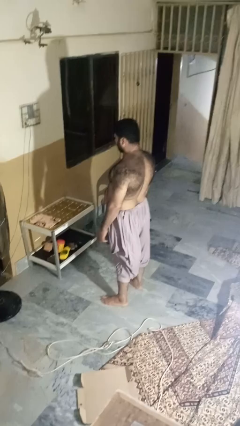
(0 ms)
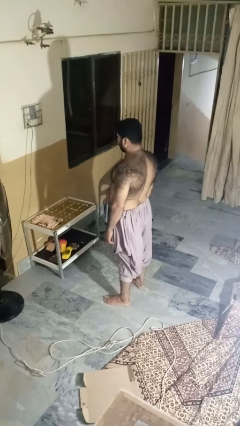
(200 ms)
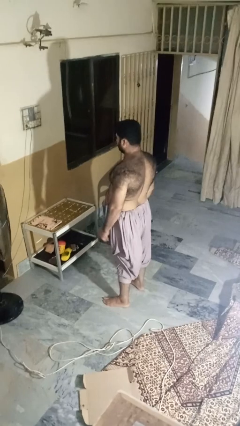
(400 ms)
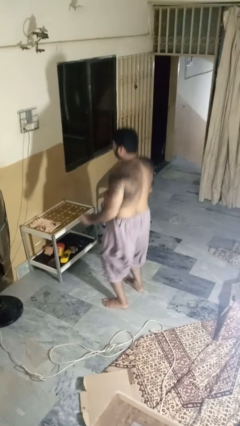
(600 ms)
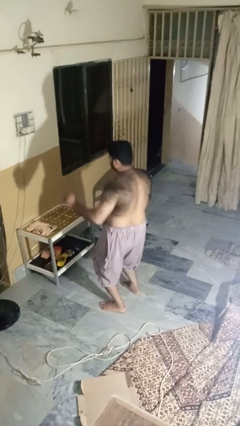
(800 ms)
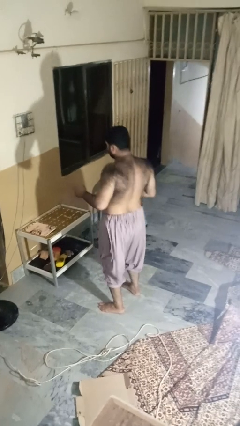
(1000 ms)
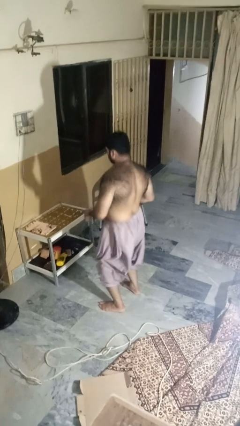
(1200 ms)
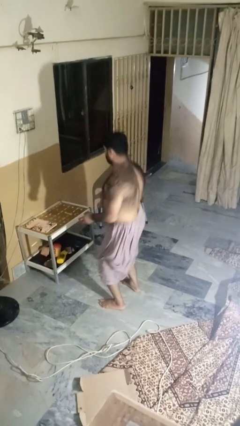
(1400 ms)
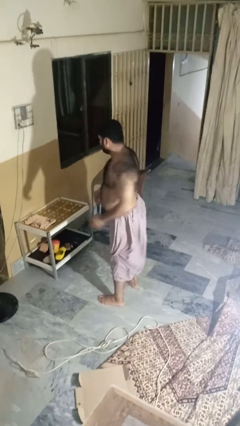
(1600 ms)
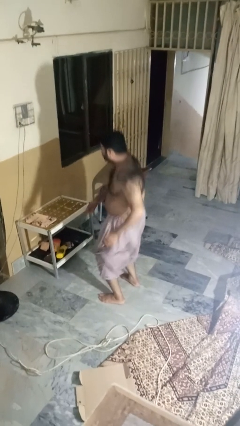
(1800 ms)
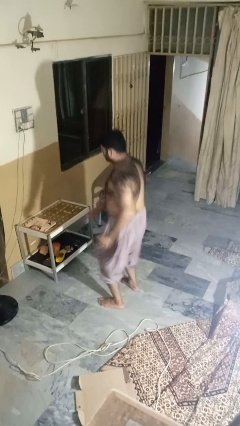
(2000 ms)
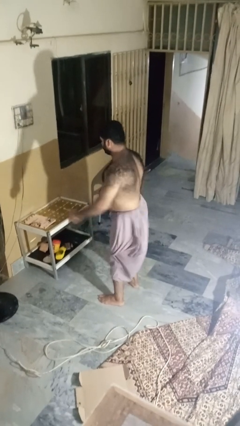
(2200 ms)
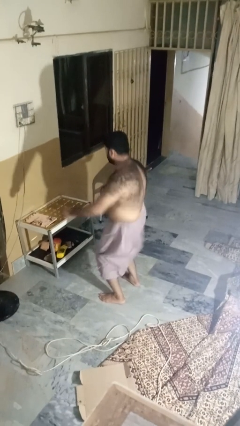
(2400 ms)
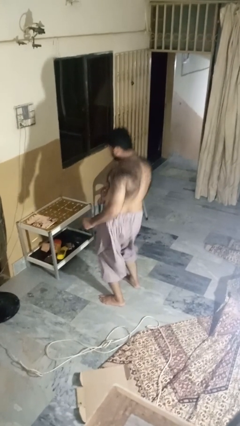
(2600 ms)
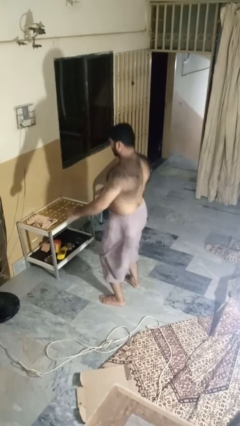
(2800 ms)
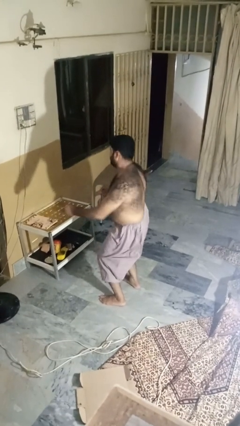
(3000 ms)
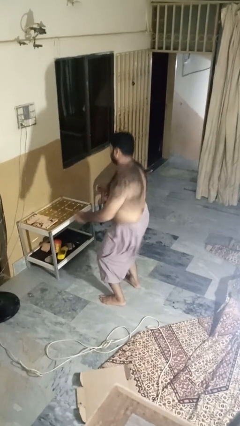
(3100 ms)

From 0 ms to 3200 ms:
person dances in place

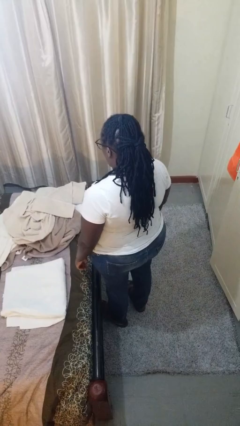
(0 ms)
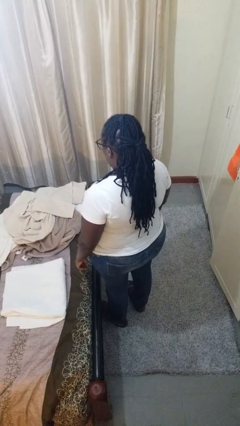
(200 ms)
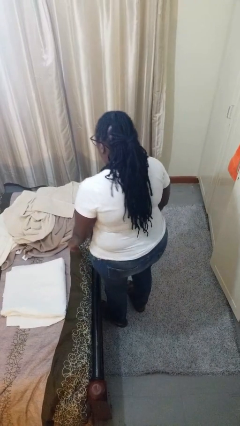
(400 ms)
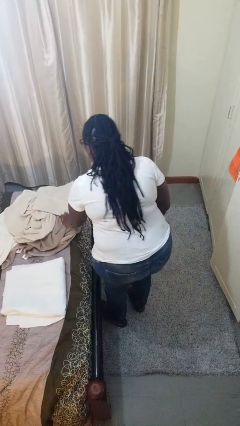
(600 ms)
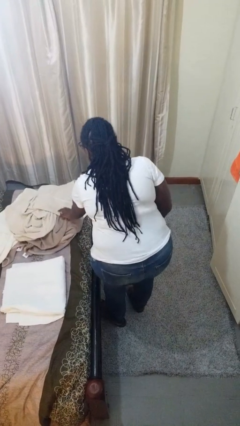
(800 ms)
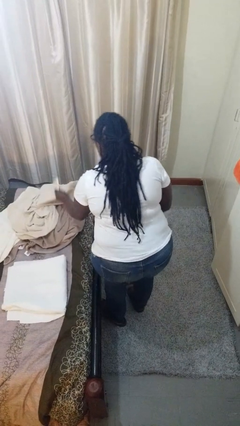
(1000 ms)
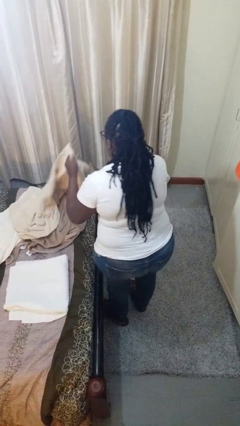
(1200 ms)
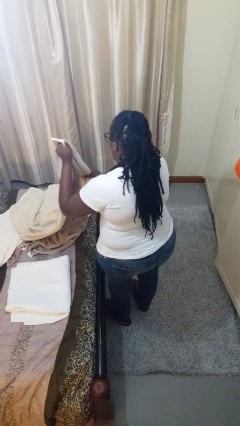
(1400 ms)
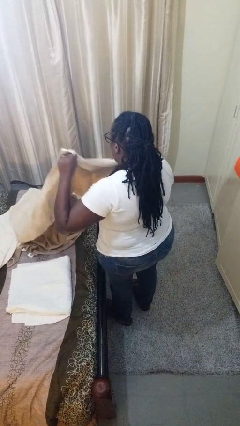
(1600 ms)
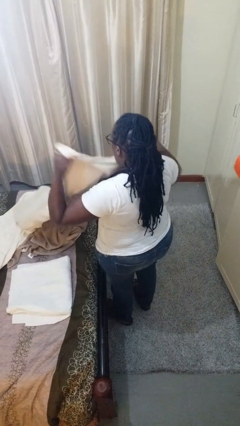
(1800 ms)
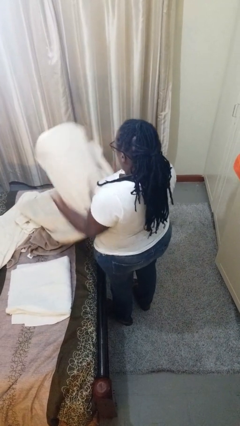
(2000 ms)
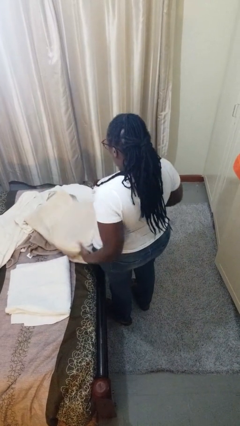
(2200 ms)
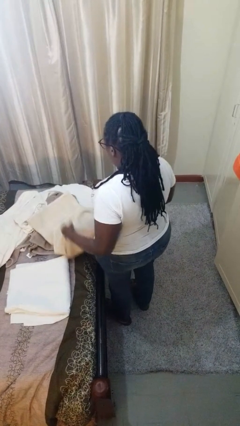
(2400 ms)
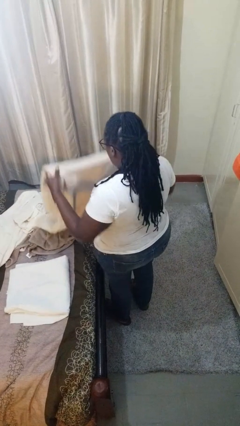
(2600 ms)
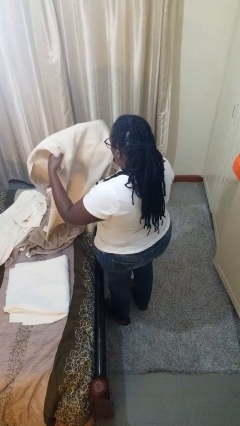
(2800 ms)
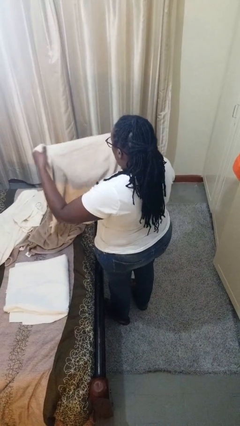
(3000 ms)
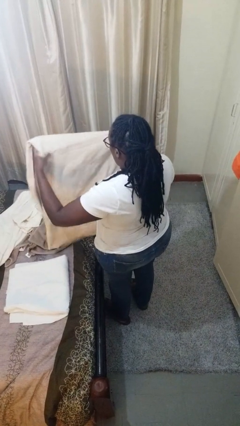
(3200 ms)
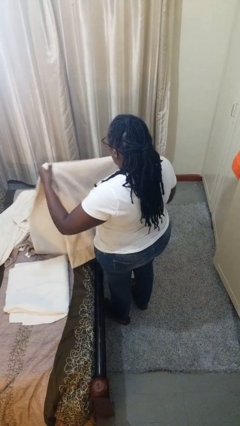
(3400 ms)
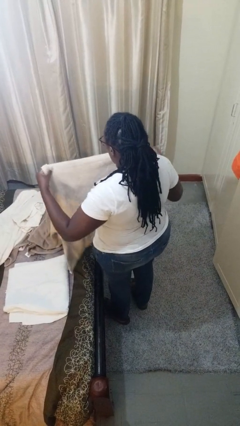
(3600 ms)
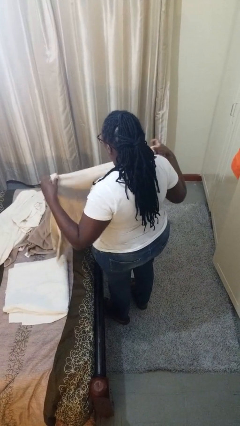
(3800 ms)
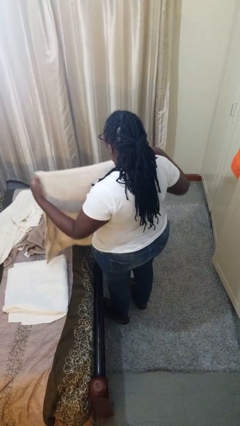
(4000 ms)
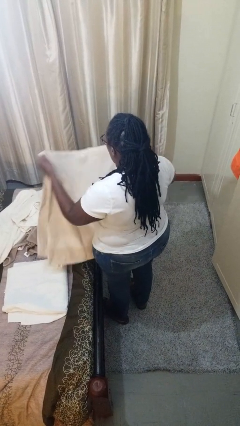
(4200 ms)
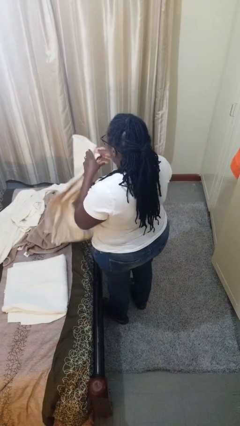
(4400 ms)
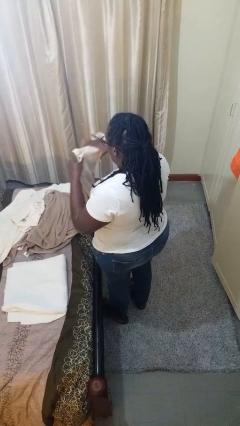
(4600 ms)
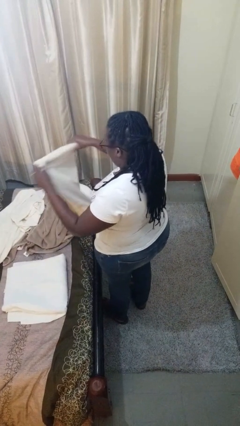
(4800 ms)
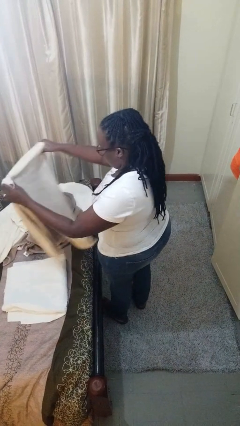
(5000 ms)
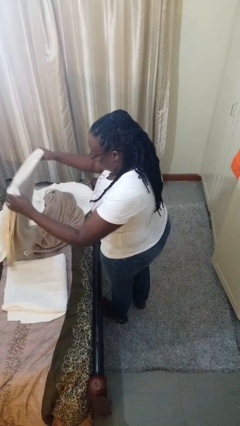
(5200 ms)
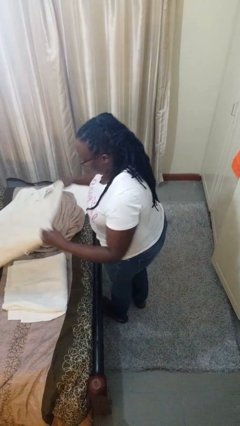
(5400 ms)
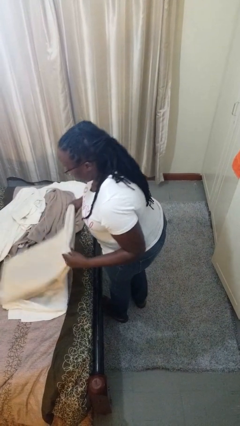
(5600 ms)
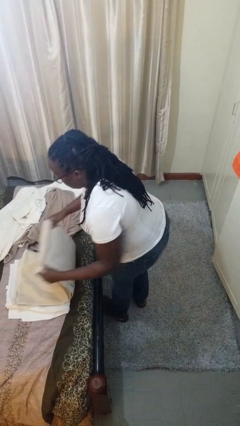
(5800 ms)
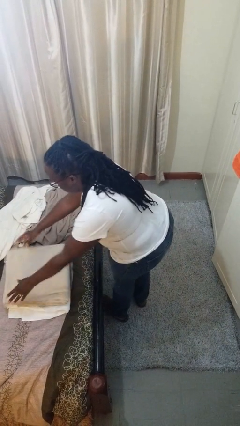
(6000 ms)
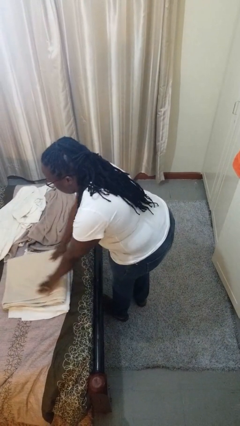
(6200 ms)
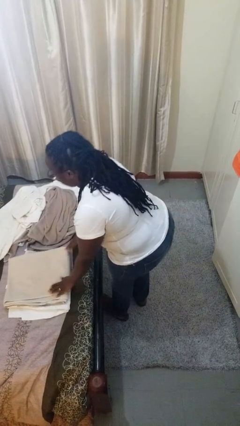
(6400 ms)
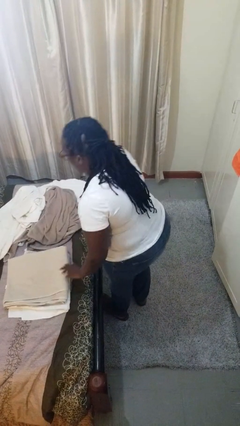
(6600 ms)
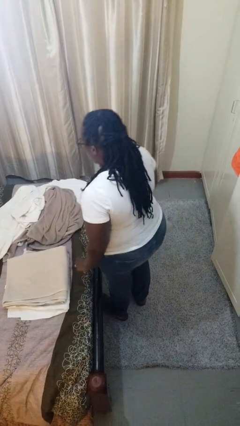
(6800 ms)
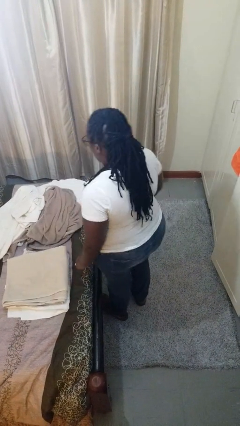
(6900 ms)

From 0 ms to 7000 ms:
person folds towel

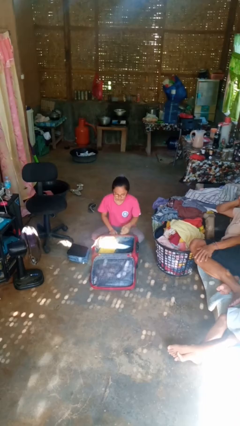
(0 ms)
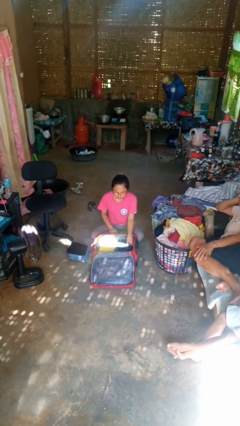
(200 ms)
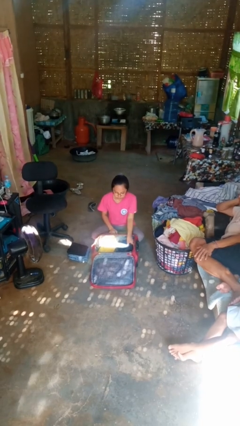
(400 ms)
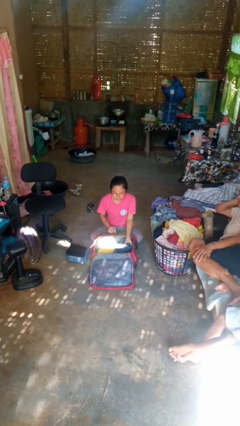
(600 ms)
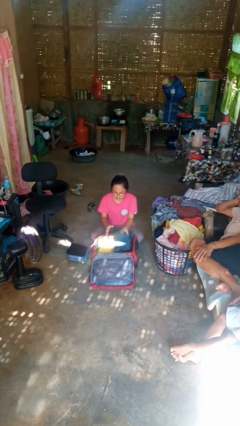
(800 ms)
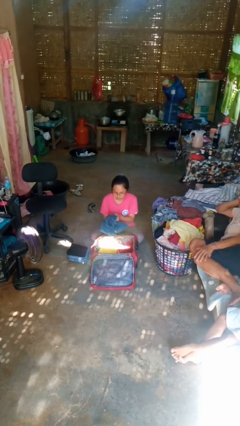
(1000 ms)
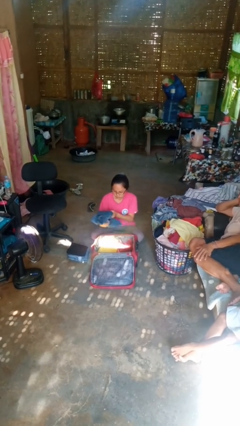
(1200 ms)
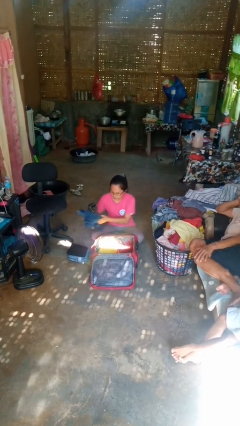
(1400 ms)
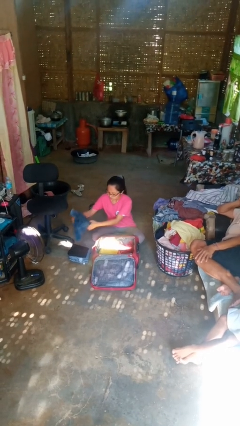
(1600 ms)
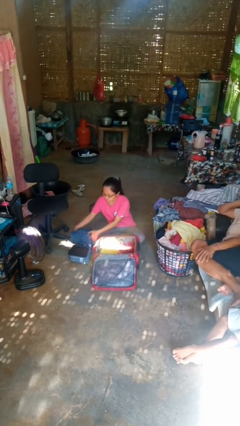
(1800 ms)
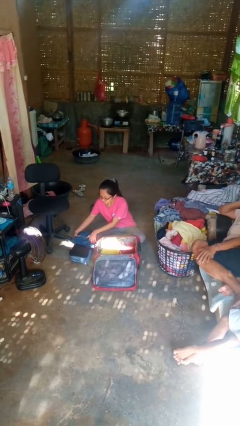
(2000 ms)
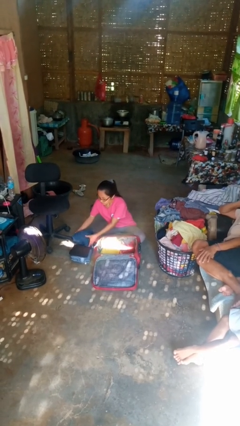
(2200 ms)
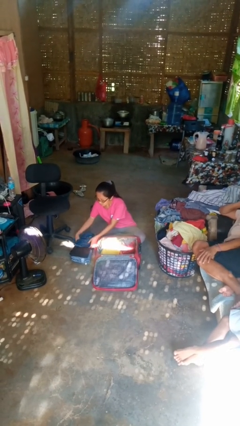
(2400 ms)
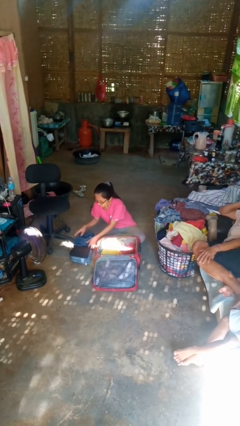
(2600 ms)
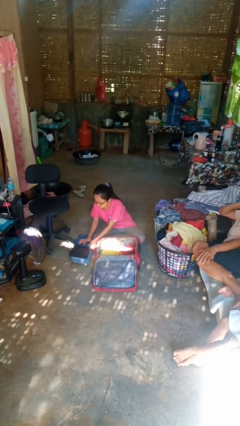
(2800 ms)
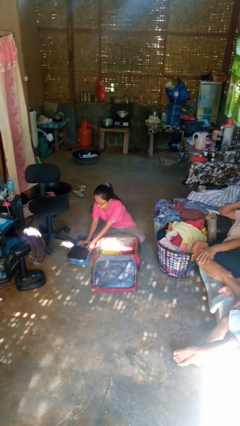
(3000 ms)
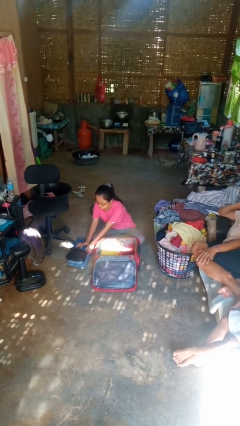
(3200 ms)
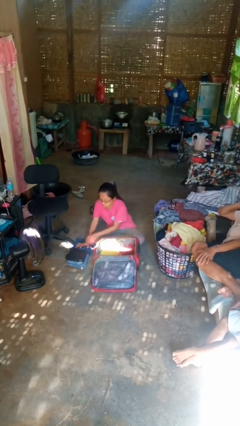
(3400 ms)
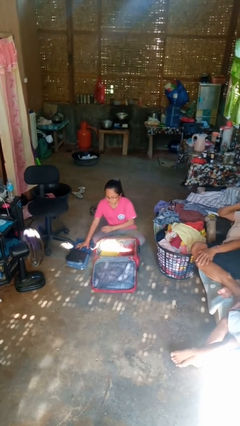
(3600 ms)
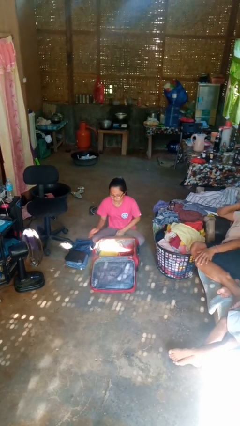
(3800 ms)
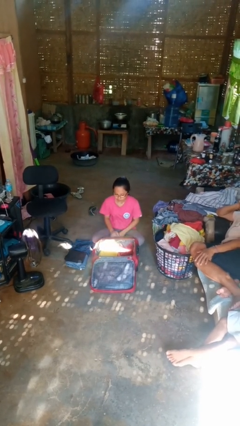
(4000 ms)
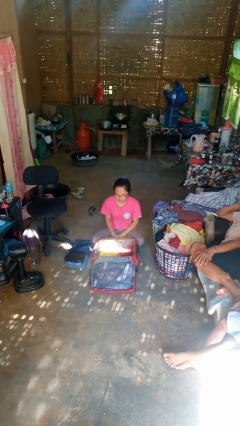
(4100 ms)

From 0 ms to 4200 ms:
person unloads clothes from suitcase

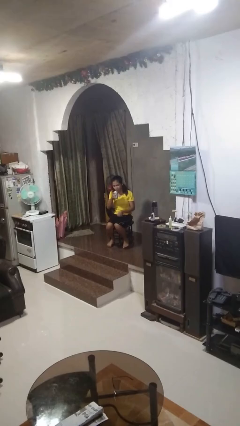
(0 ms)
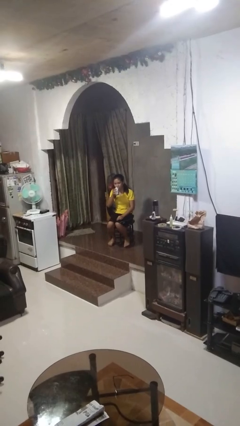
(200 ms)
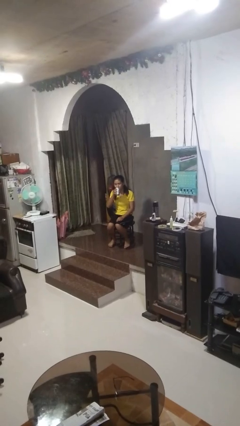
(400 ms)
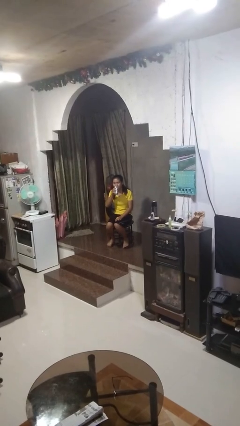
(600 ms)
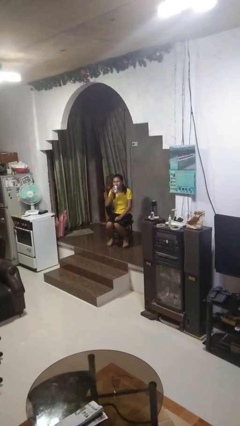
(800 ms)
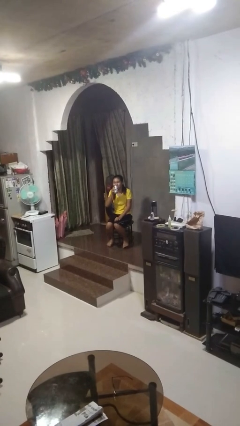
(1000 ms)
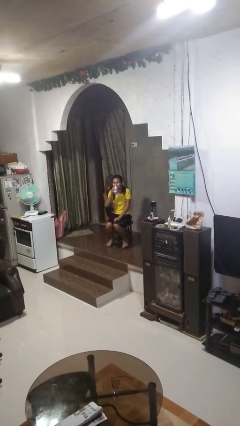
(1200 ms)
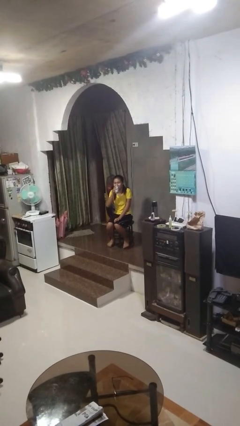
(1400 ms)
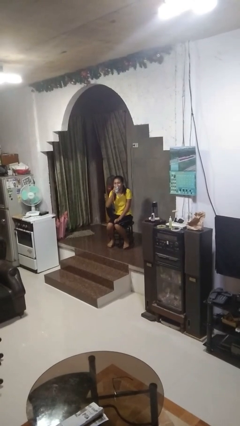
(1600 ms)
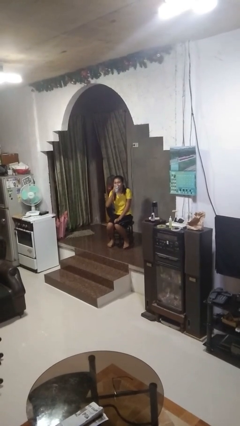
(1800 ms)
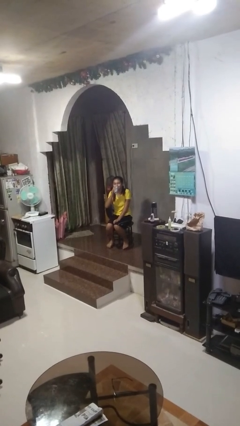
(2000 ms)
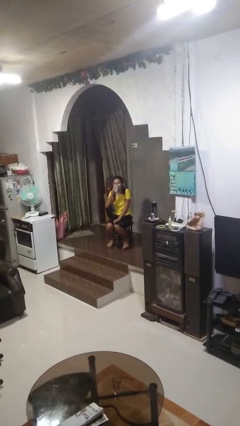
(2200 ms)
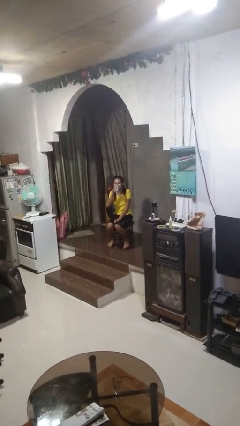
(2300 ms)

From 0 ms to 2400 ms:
person drinks from beverage can

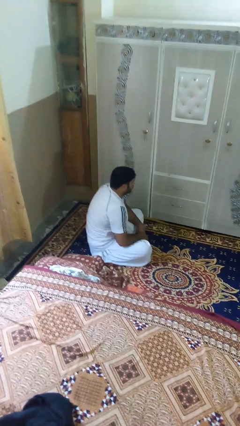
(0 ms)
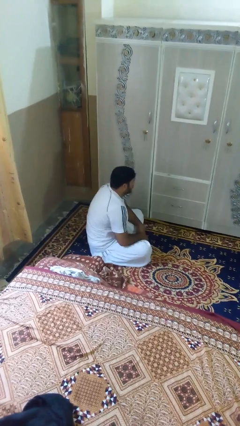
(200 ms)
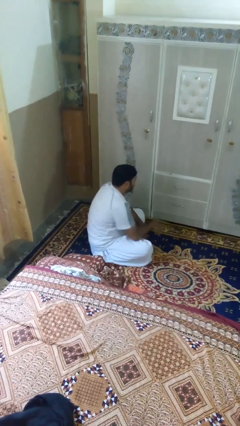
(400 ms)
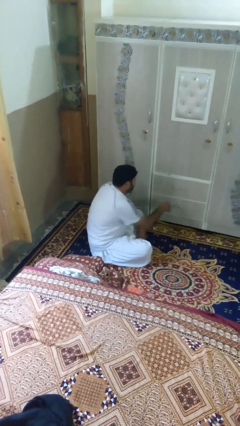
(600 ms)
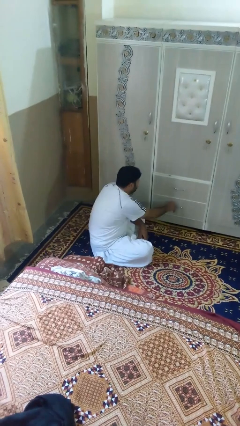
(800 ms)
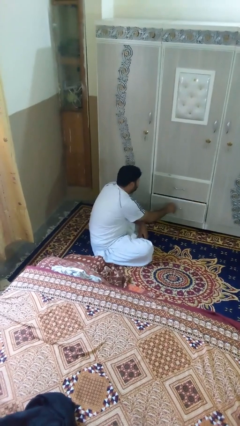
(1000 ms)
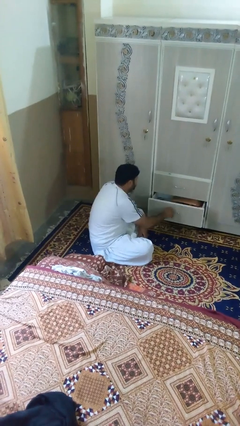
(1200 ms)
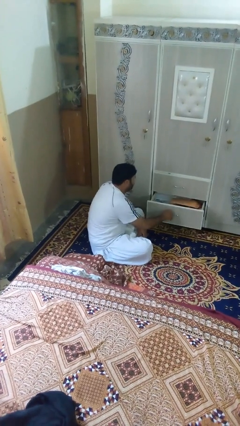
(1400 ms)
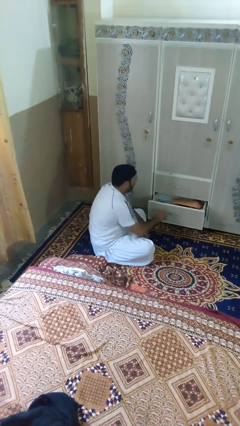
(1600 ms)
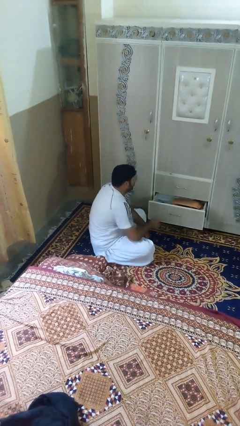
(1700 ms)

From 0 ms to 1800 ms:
person opens dresser drawer
